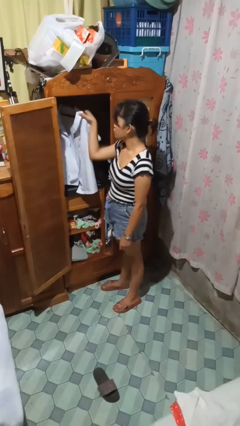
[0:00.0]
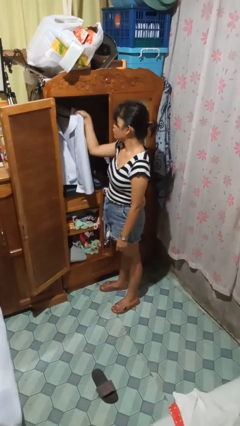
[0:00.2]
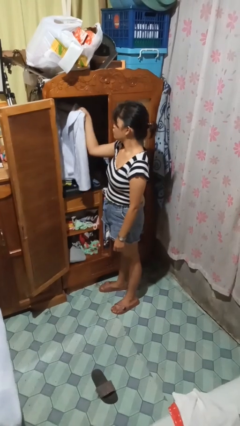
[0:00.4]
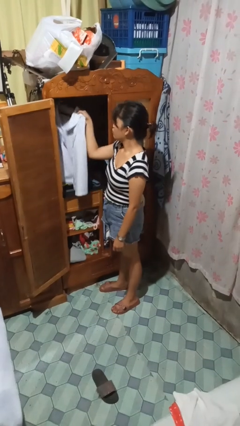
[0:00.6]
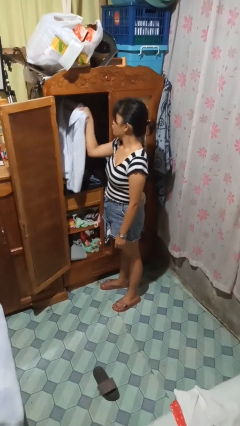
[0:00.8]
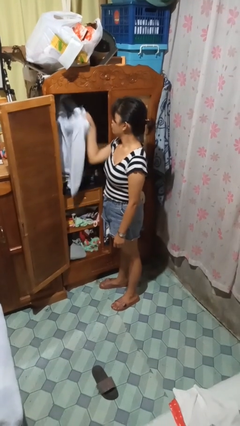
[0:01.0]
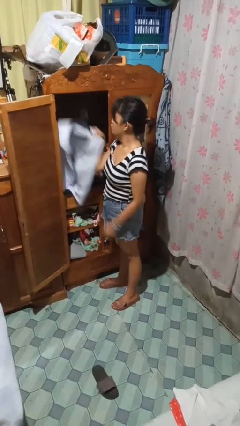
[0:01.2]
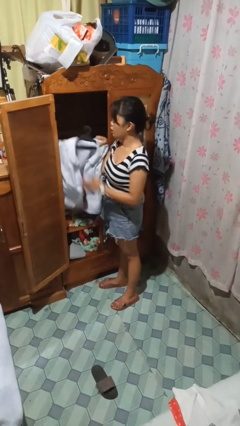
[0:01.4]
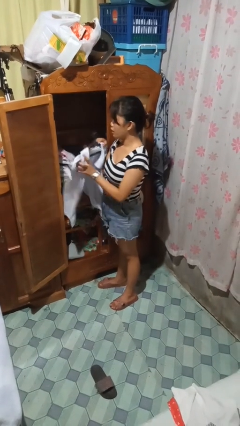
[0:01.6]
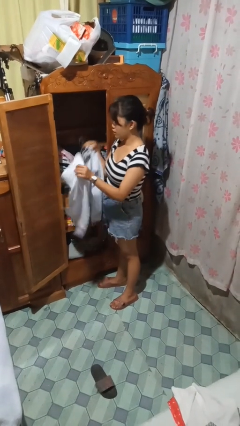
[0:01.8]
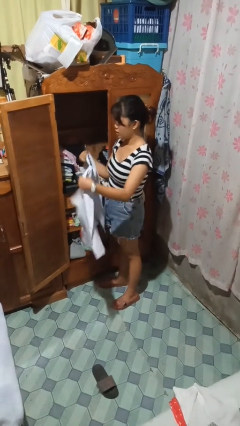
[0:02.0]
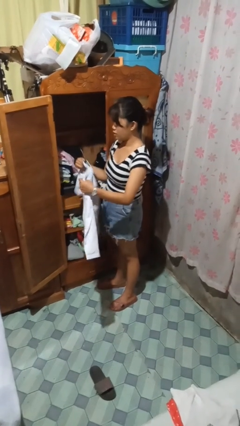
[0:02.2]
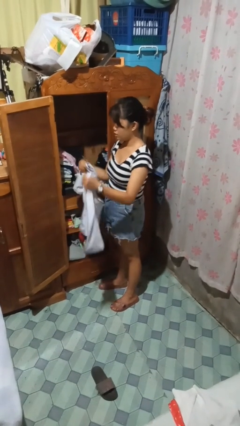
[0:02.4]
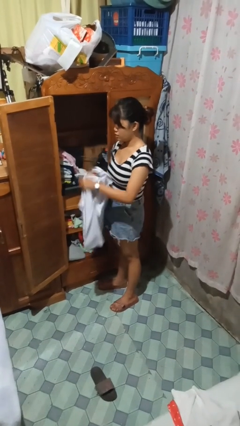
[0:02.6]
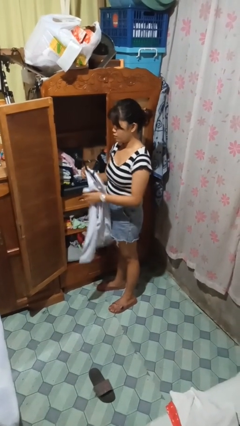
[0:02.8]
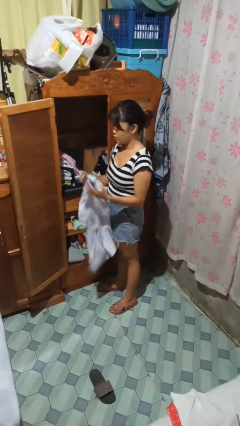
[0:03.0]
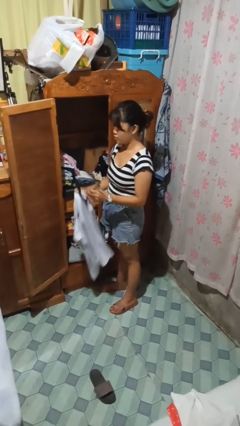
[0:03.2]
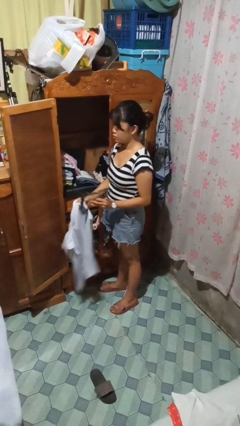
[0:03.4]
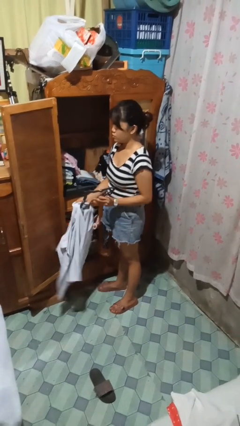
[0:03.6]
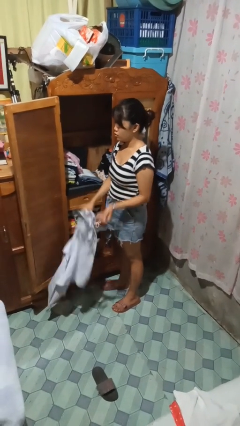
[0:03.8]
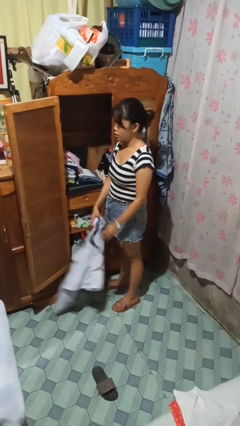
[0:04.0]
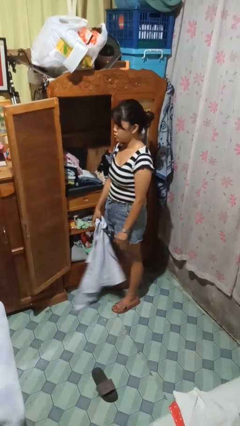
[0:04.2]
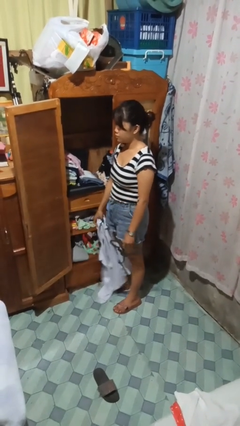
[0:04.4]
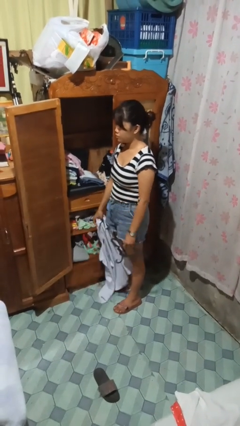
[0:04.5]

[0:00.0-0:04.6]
person takes clothes from closet

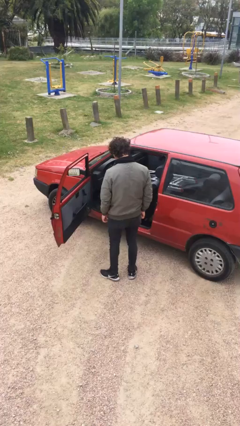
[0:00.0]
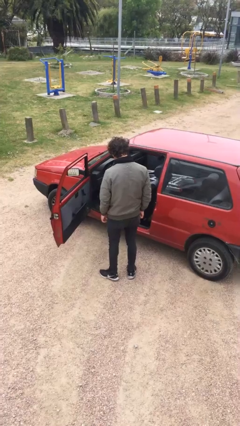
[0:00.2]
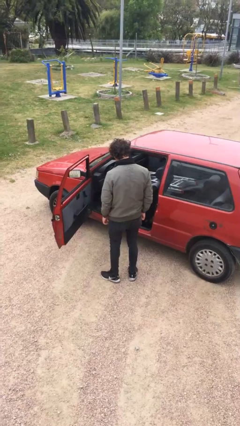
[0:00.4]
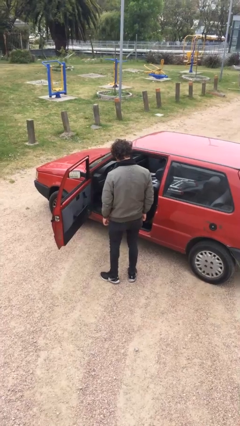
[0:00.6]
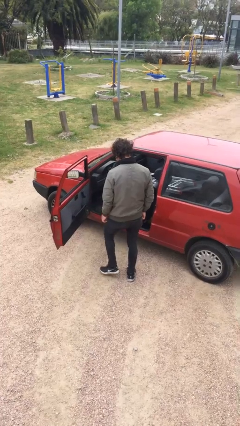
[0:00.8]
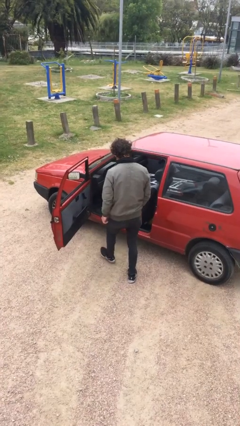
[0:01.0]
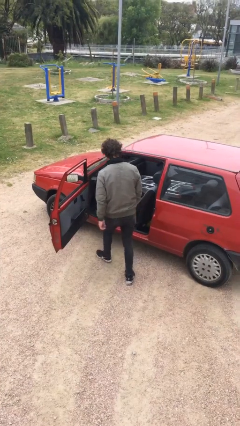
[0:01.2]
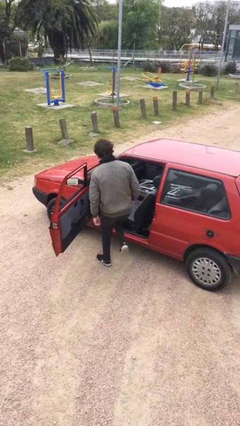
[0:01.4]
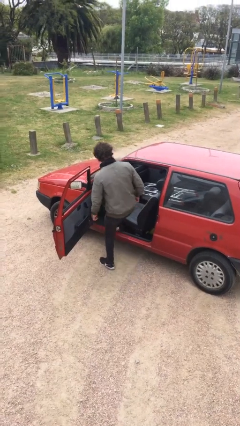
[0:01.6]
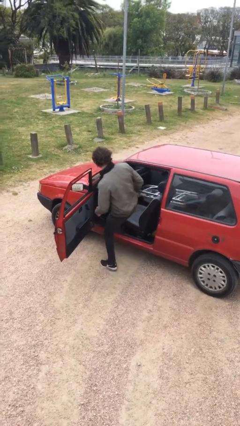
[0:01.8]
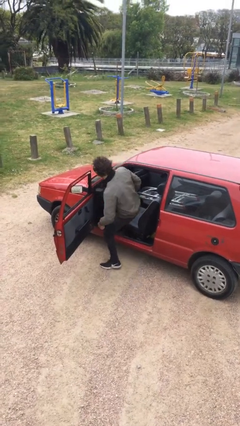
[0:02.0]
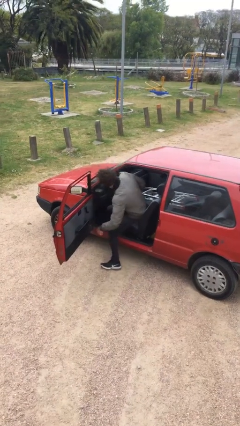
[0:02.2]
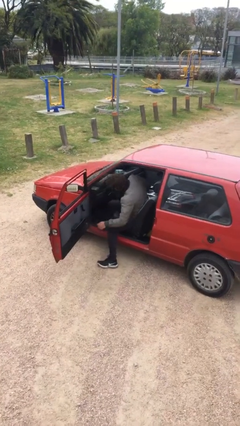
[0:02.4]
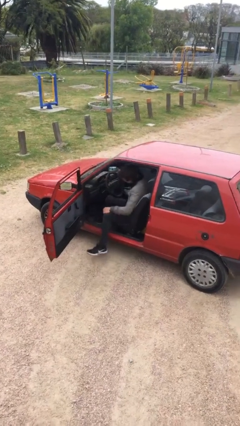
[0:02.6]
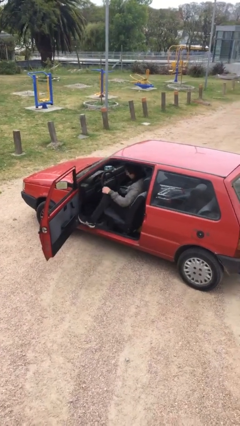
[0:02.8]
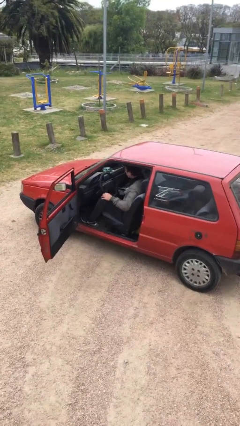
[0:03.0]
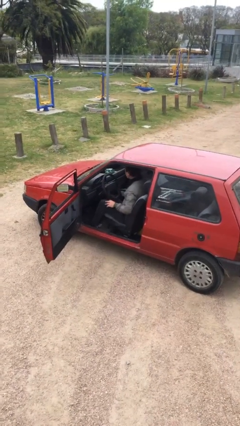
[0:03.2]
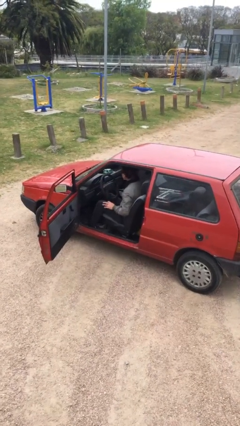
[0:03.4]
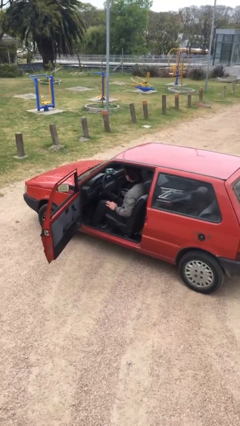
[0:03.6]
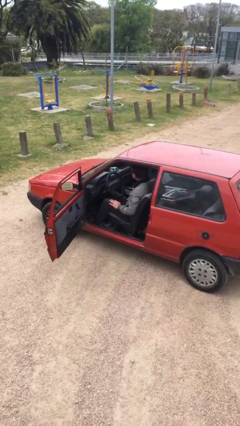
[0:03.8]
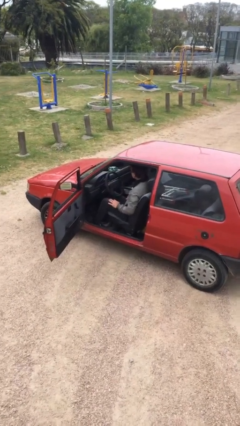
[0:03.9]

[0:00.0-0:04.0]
person enters car

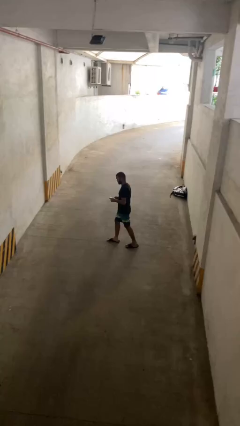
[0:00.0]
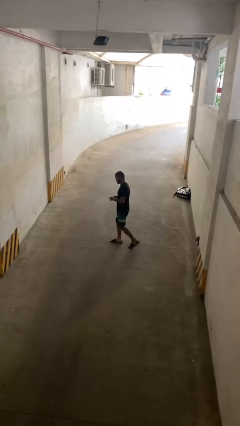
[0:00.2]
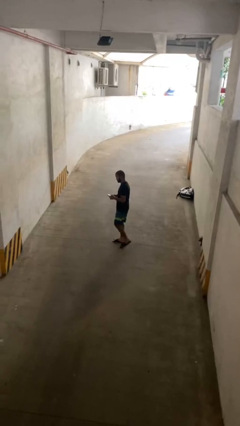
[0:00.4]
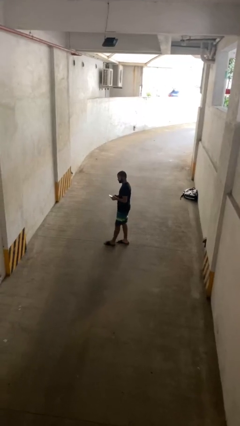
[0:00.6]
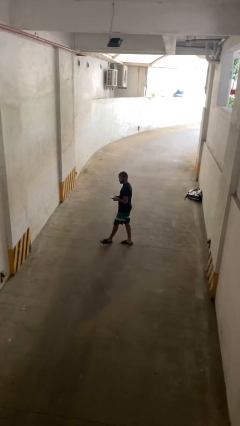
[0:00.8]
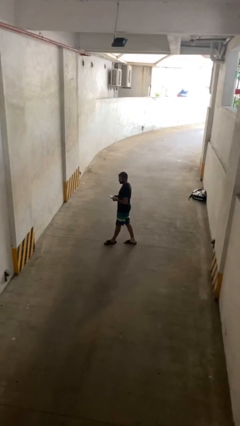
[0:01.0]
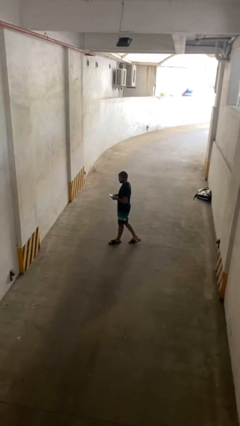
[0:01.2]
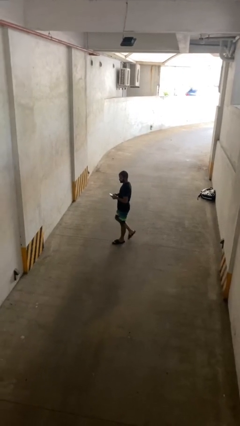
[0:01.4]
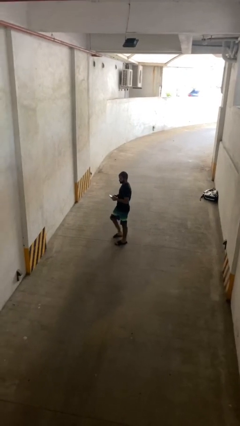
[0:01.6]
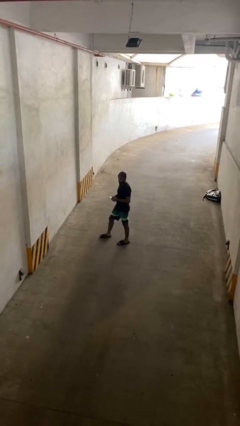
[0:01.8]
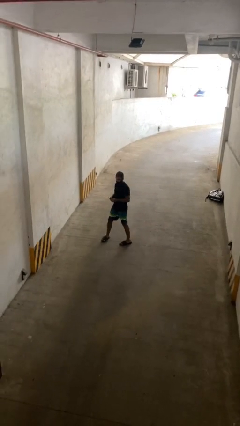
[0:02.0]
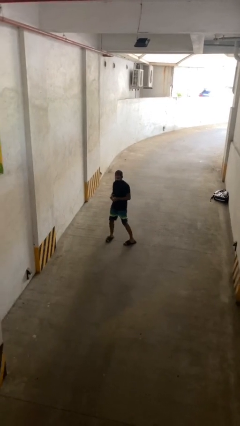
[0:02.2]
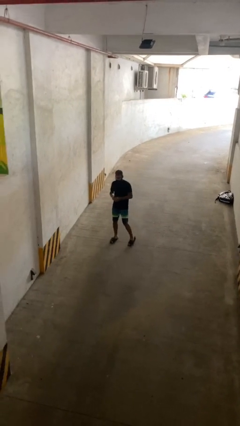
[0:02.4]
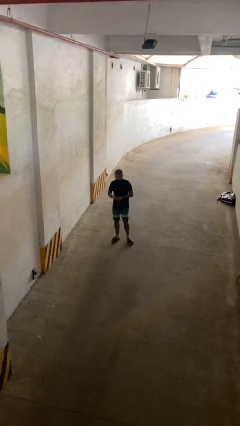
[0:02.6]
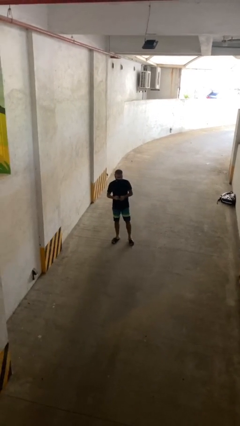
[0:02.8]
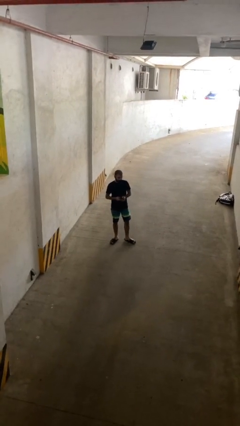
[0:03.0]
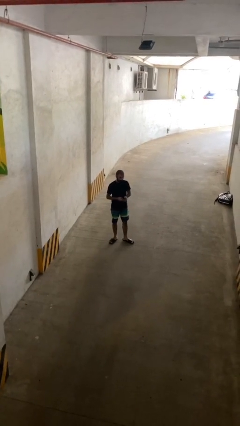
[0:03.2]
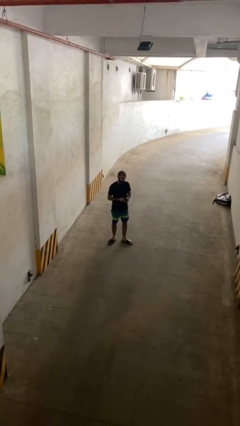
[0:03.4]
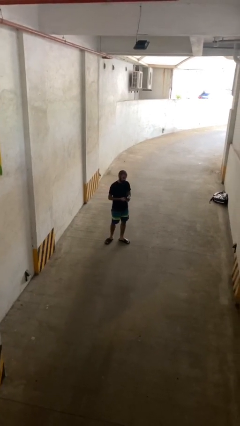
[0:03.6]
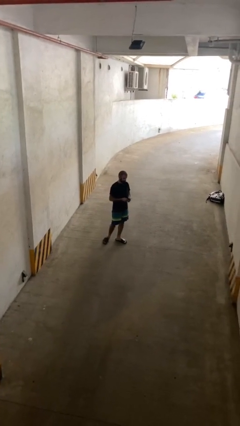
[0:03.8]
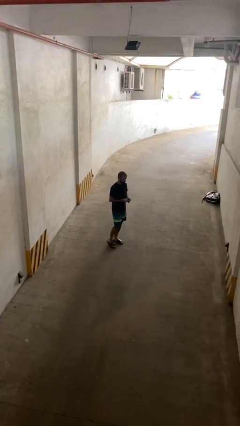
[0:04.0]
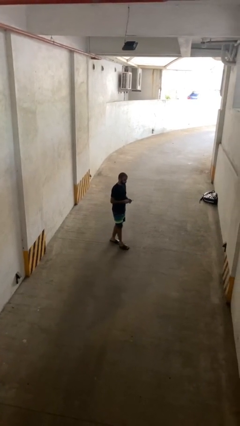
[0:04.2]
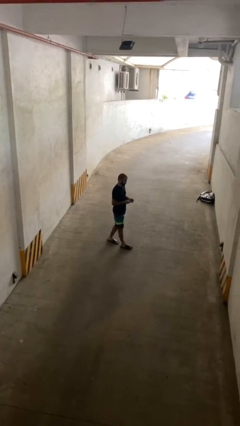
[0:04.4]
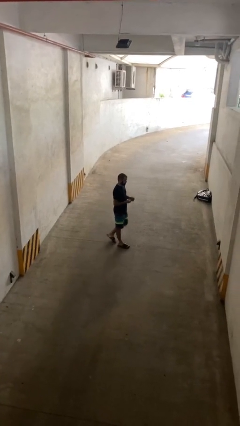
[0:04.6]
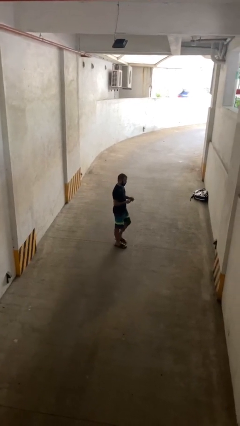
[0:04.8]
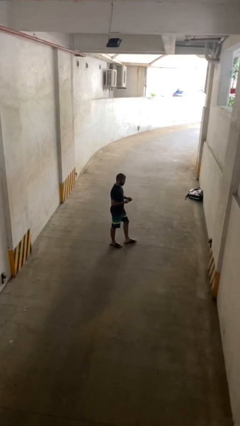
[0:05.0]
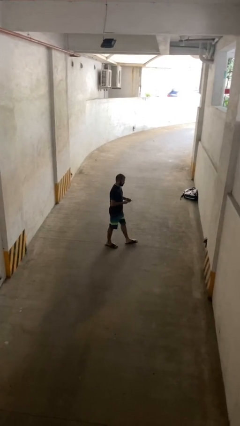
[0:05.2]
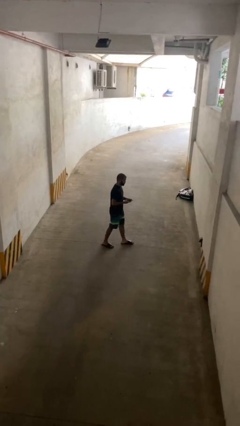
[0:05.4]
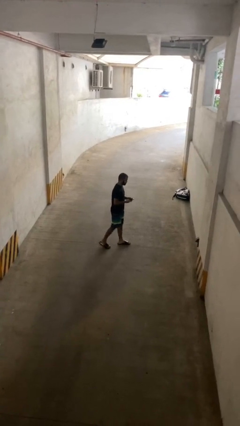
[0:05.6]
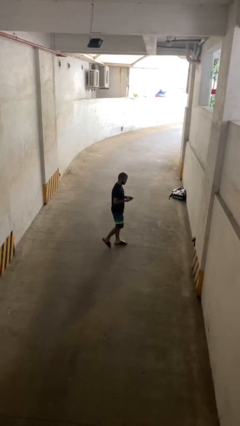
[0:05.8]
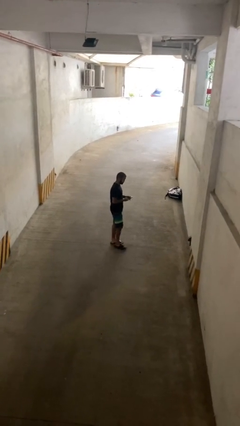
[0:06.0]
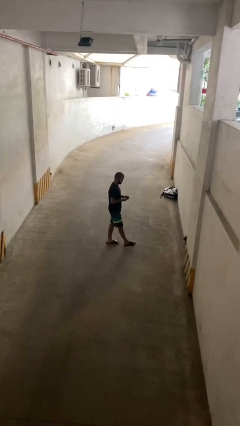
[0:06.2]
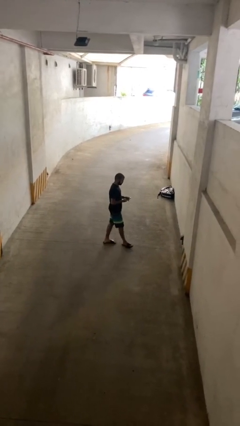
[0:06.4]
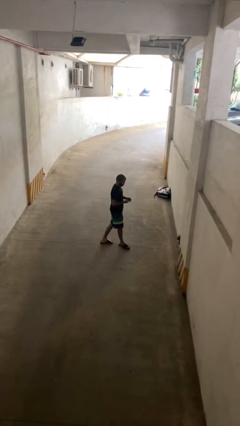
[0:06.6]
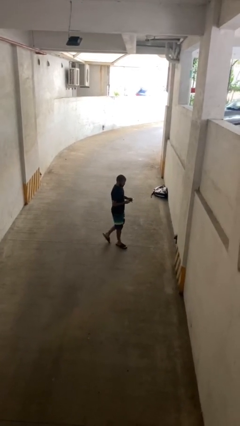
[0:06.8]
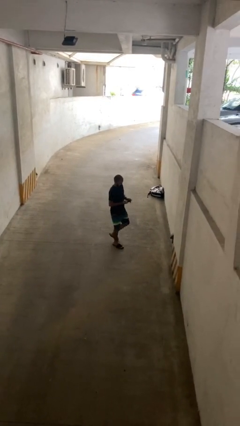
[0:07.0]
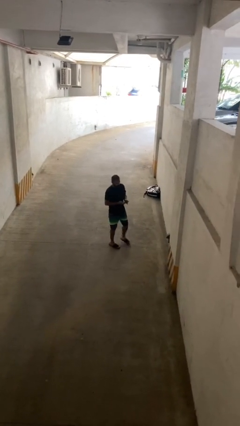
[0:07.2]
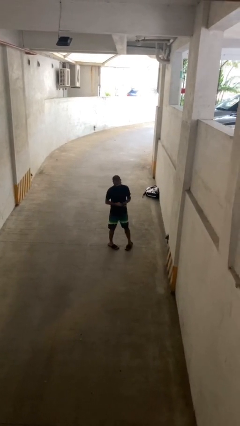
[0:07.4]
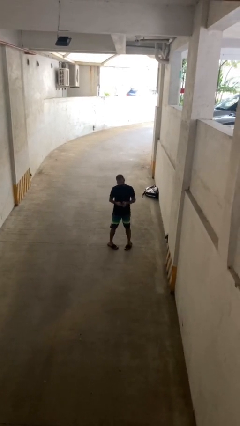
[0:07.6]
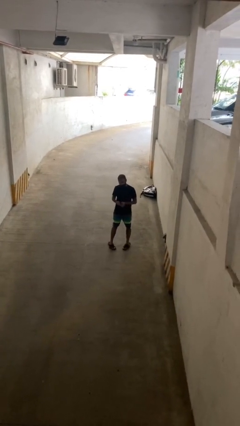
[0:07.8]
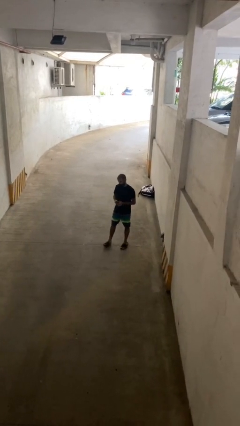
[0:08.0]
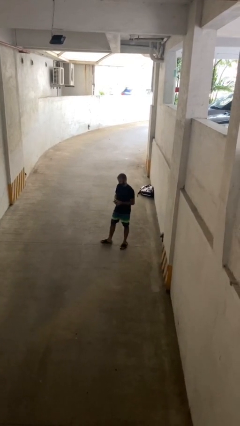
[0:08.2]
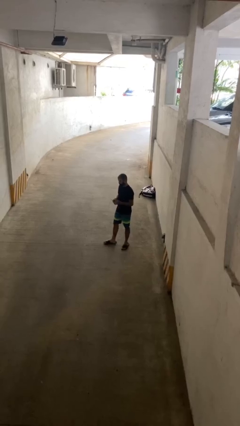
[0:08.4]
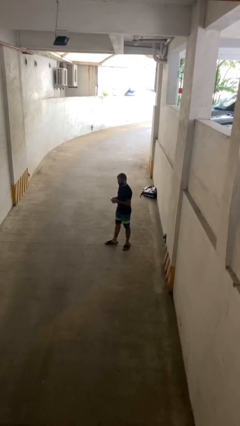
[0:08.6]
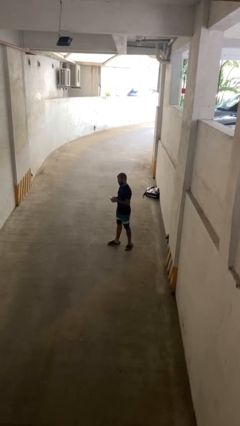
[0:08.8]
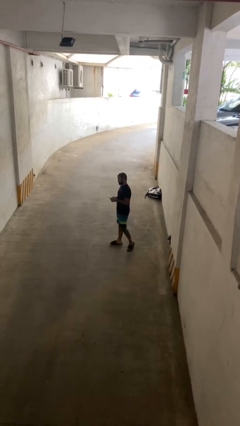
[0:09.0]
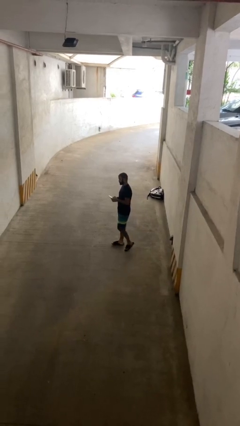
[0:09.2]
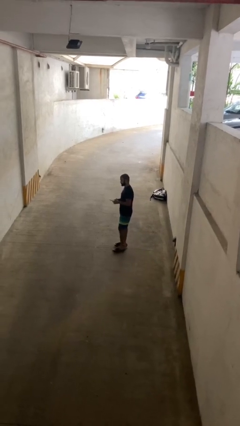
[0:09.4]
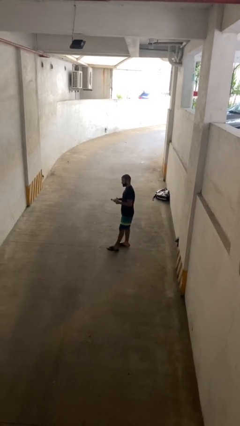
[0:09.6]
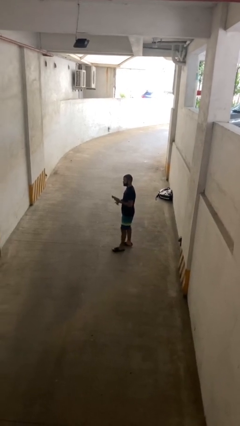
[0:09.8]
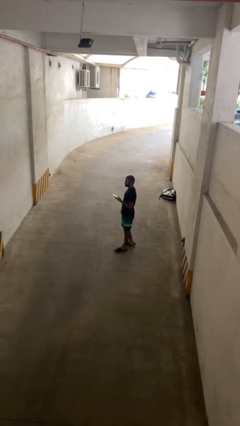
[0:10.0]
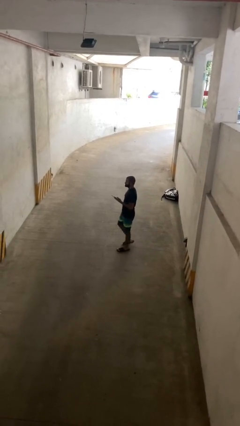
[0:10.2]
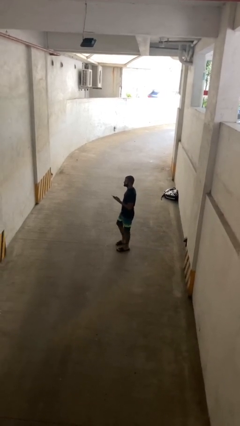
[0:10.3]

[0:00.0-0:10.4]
person texts on phone
